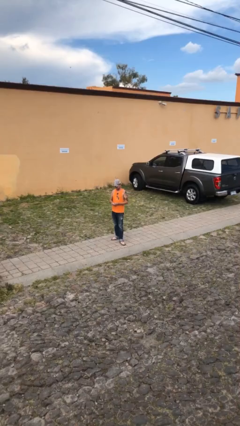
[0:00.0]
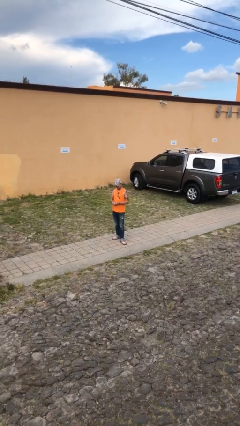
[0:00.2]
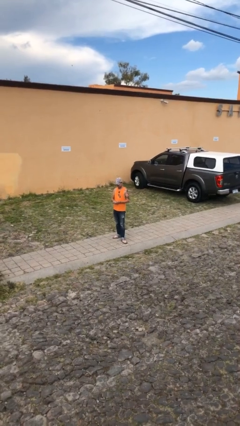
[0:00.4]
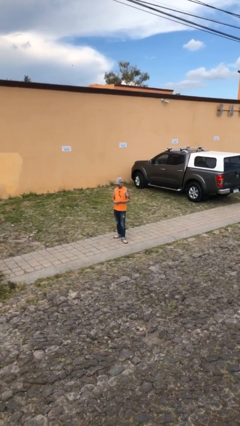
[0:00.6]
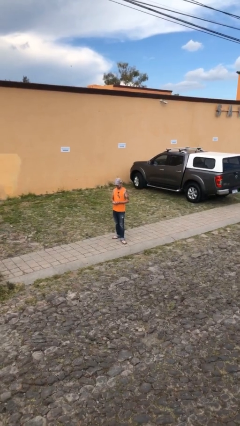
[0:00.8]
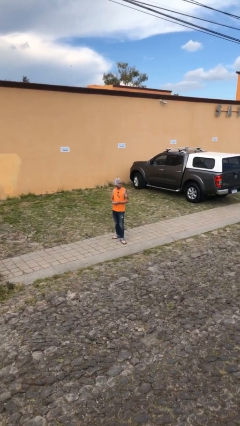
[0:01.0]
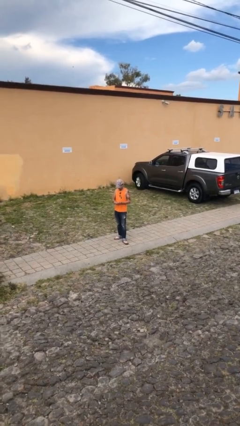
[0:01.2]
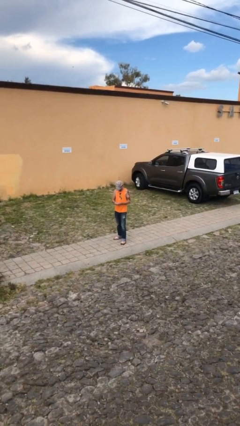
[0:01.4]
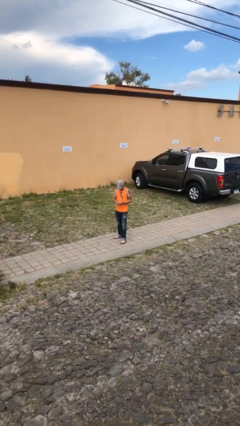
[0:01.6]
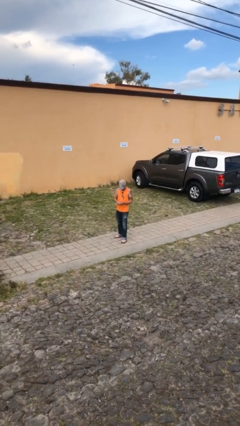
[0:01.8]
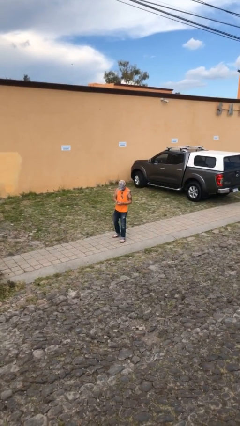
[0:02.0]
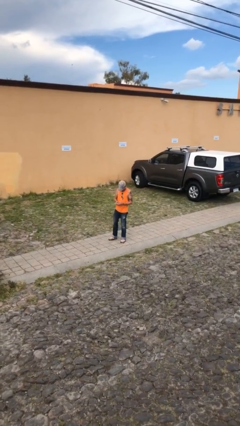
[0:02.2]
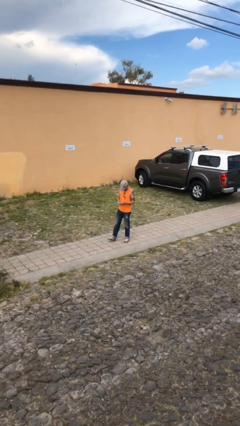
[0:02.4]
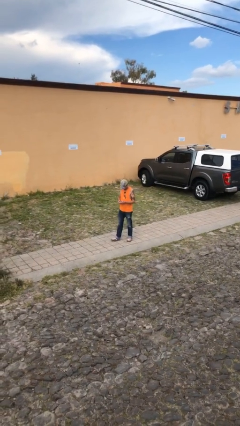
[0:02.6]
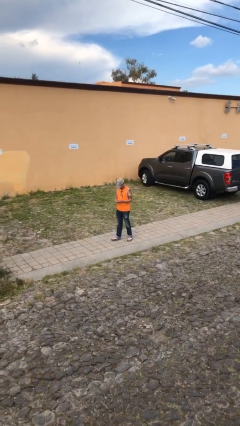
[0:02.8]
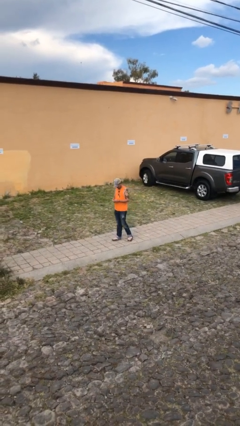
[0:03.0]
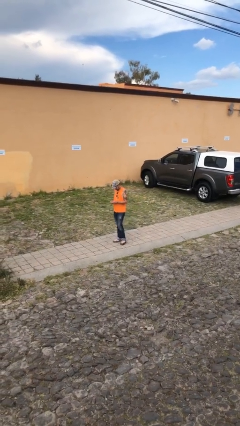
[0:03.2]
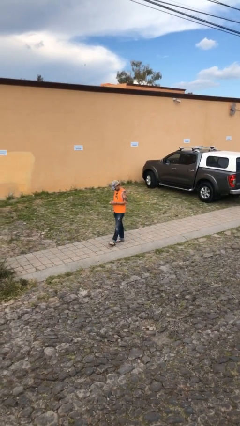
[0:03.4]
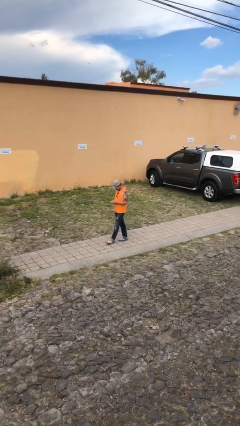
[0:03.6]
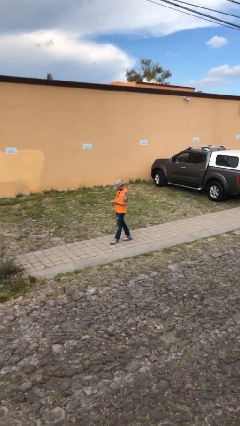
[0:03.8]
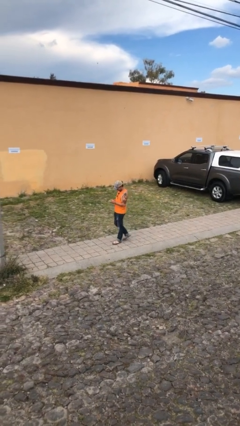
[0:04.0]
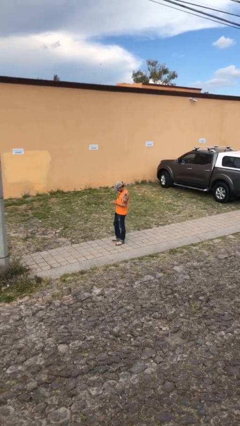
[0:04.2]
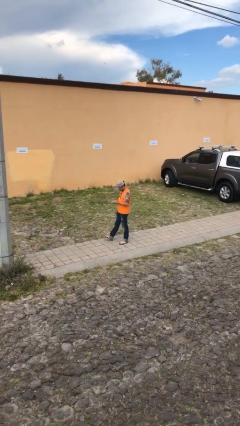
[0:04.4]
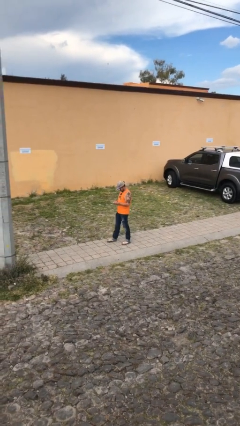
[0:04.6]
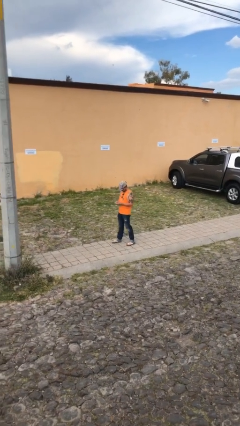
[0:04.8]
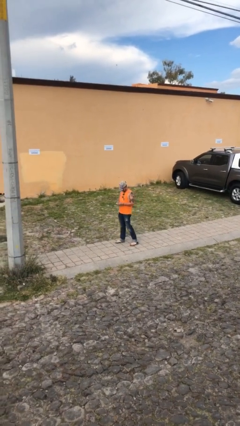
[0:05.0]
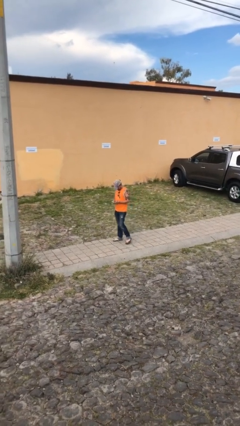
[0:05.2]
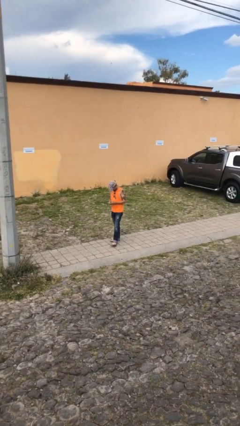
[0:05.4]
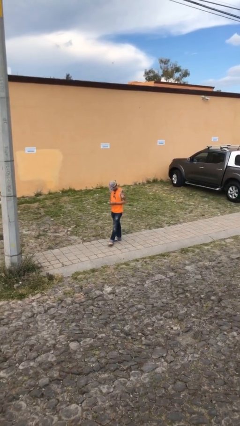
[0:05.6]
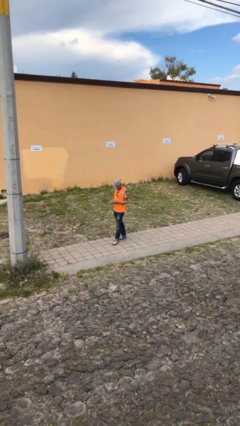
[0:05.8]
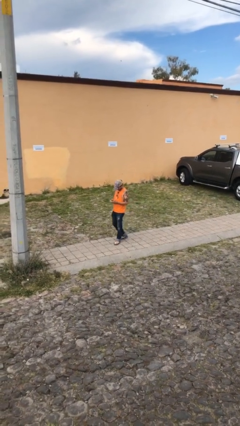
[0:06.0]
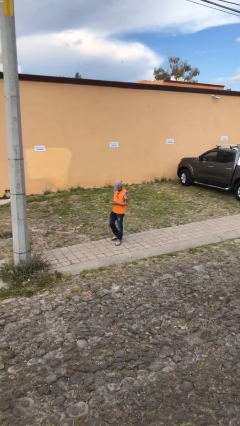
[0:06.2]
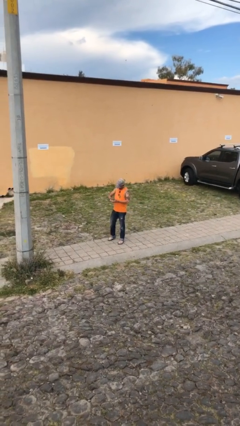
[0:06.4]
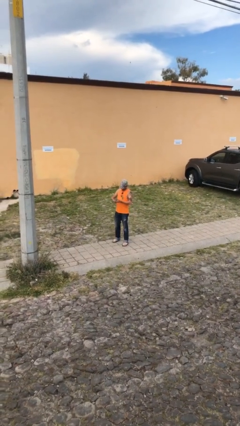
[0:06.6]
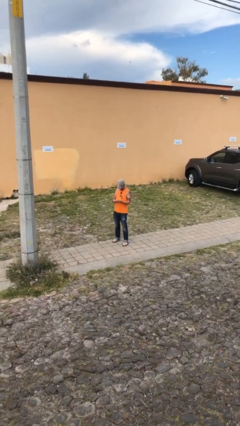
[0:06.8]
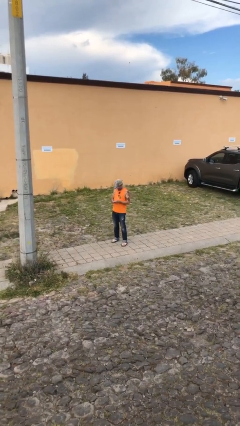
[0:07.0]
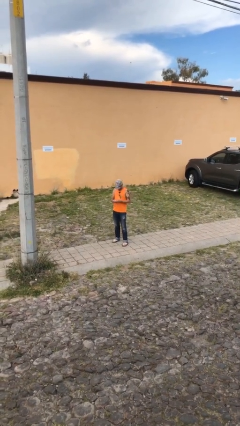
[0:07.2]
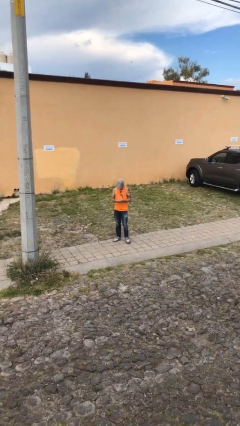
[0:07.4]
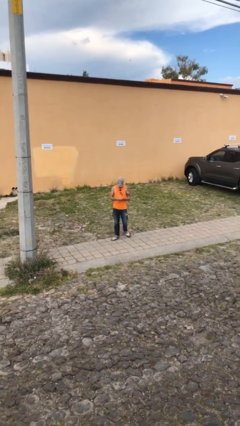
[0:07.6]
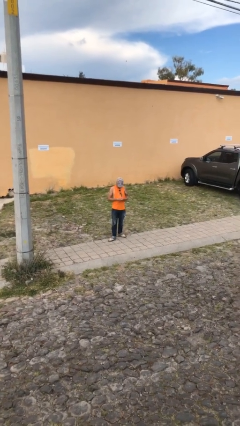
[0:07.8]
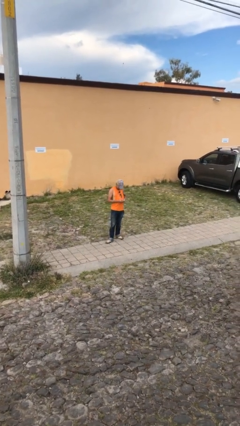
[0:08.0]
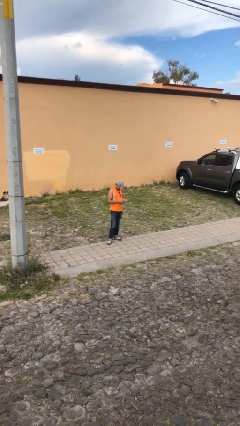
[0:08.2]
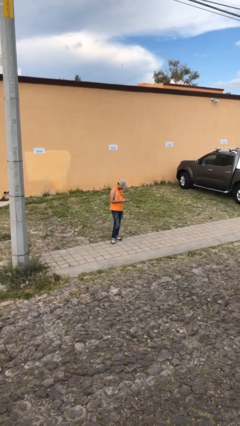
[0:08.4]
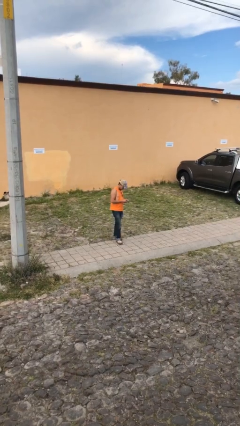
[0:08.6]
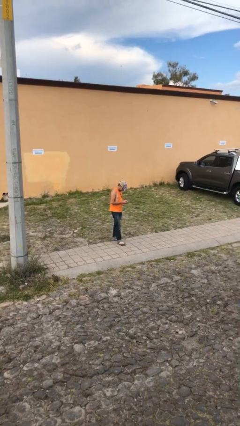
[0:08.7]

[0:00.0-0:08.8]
person texts on phone

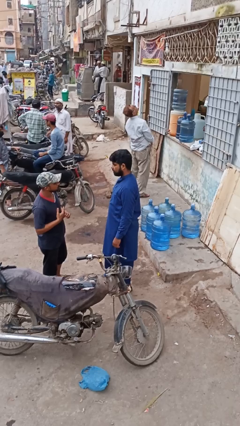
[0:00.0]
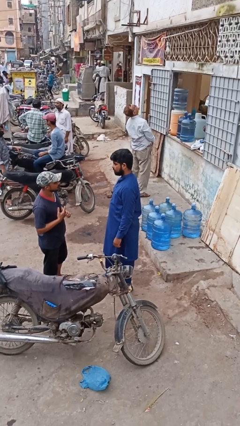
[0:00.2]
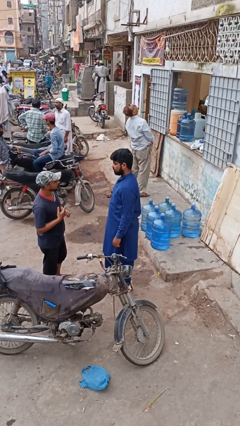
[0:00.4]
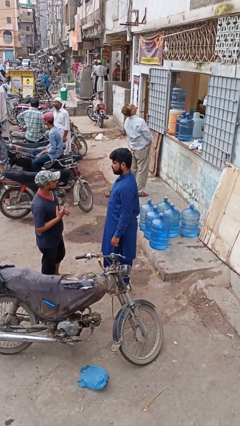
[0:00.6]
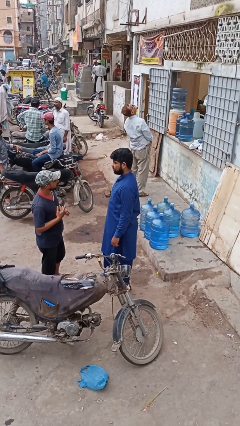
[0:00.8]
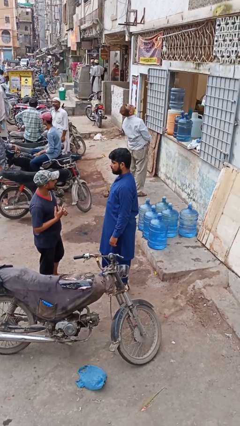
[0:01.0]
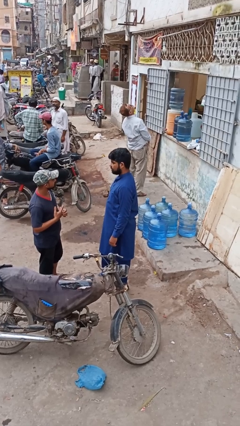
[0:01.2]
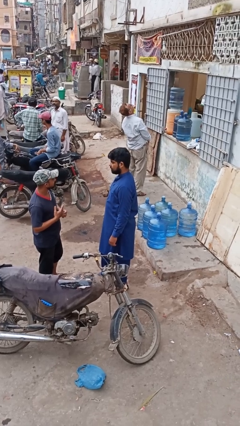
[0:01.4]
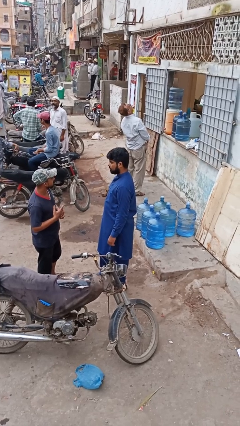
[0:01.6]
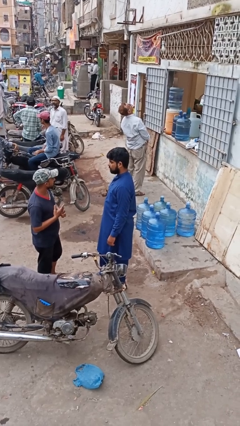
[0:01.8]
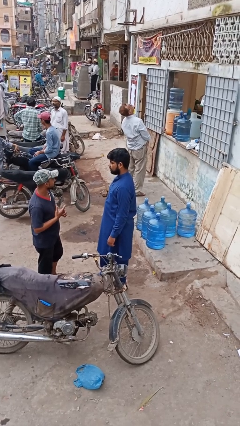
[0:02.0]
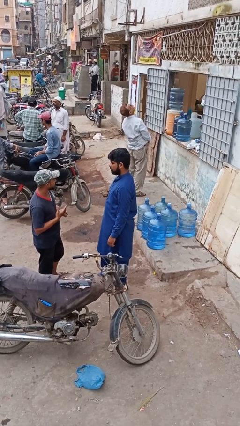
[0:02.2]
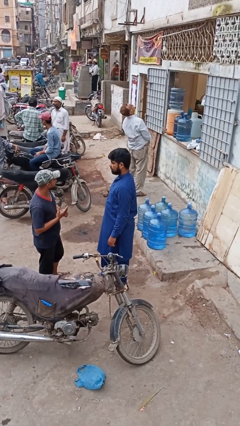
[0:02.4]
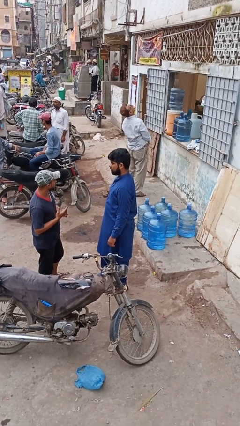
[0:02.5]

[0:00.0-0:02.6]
person talks to person

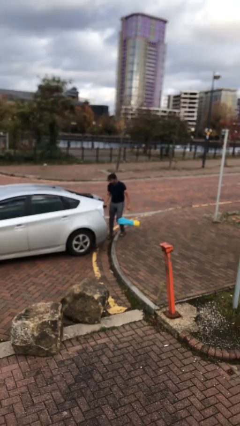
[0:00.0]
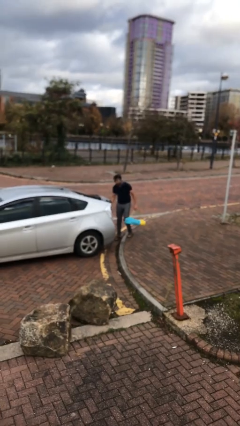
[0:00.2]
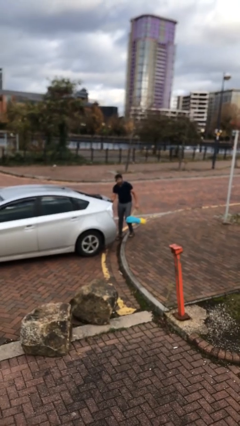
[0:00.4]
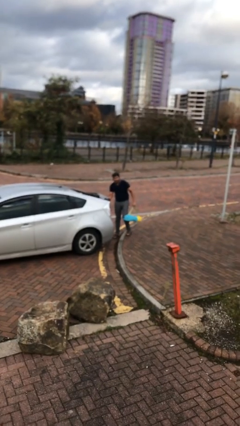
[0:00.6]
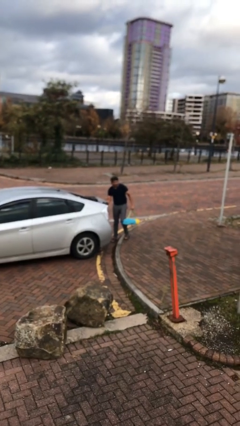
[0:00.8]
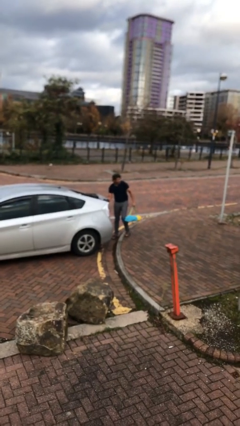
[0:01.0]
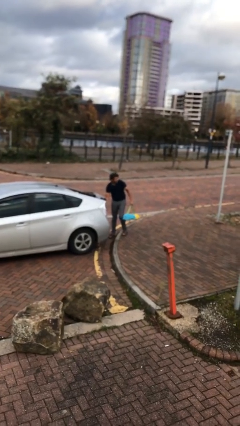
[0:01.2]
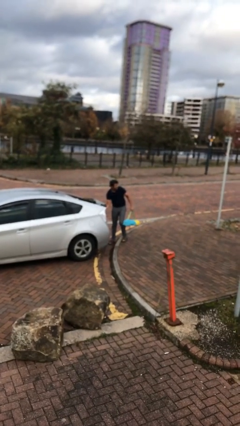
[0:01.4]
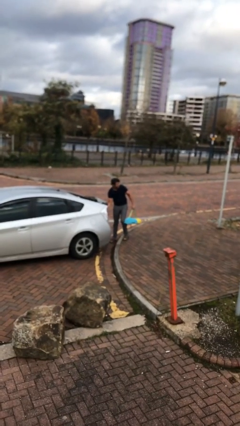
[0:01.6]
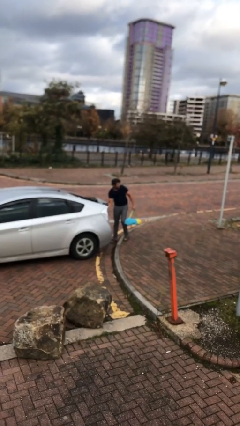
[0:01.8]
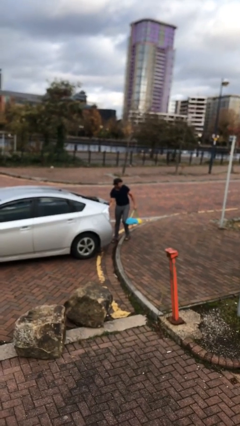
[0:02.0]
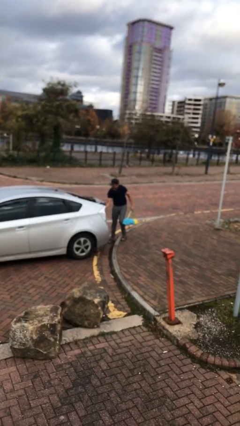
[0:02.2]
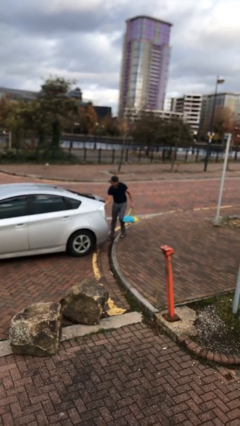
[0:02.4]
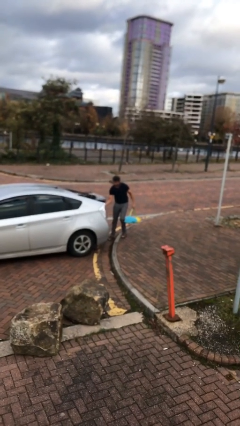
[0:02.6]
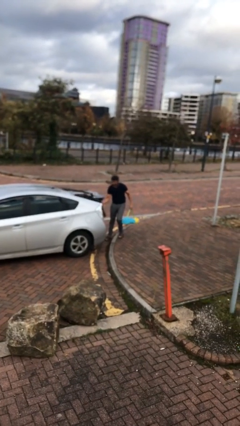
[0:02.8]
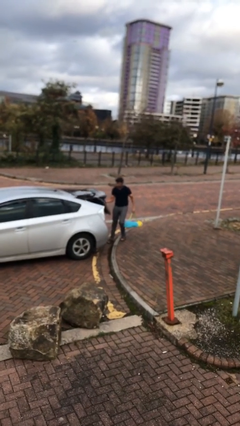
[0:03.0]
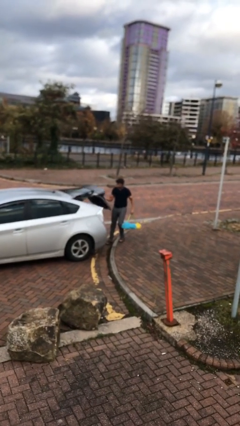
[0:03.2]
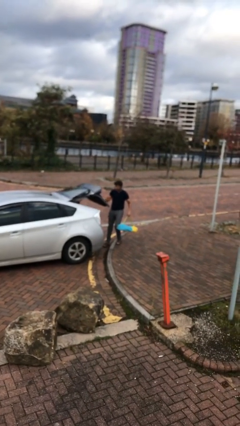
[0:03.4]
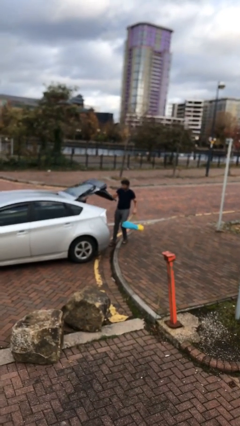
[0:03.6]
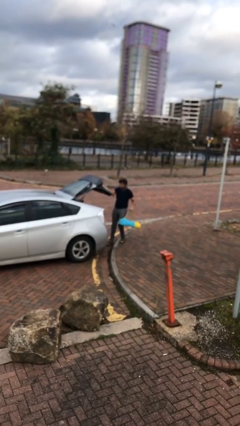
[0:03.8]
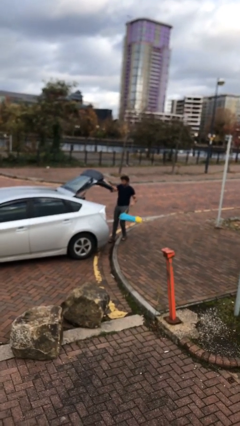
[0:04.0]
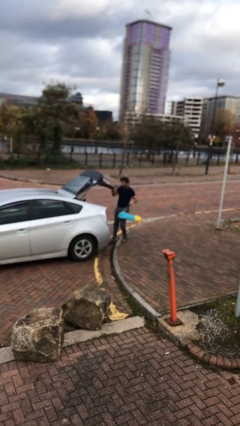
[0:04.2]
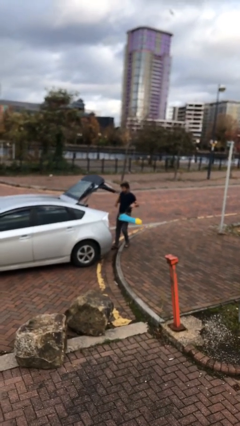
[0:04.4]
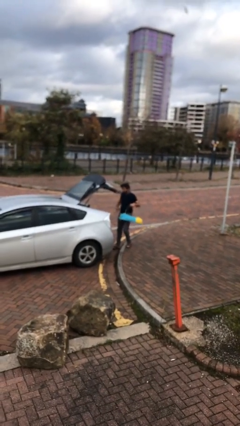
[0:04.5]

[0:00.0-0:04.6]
person opens car trunk

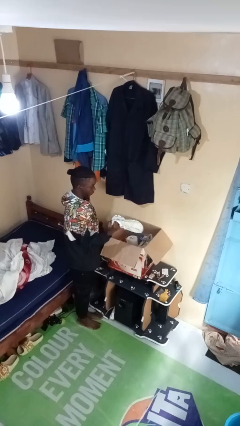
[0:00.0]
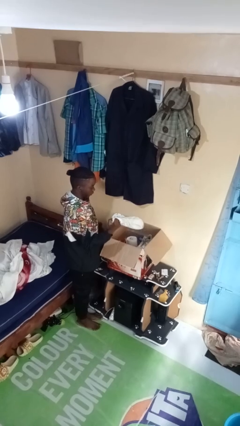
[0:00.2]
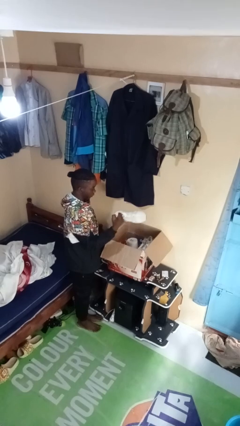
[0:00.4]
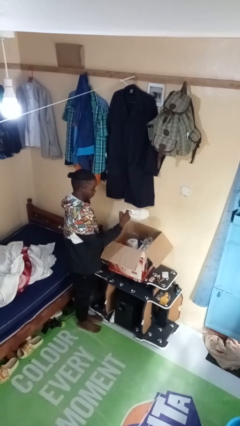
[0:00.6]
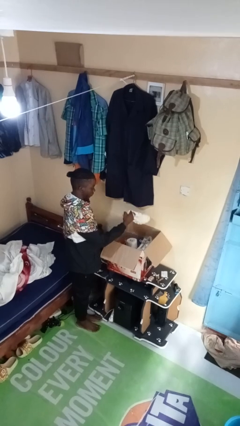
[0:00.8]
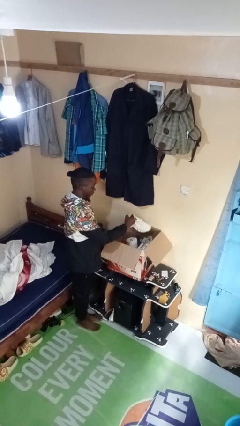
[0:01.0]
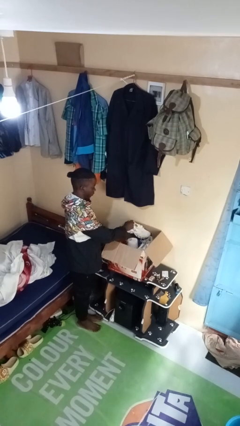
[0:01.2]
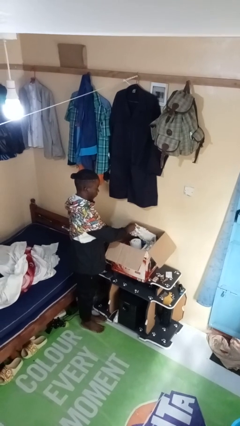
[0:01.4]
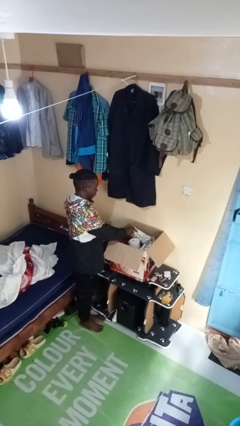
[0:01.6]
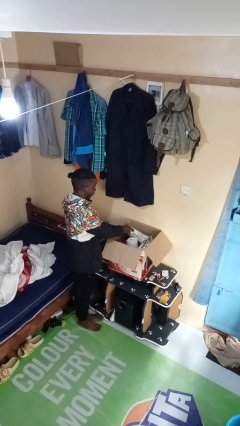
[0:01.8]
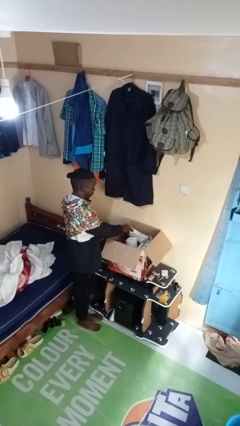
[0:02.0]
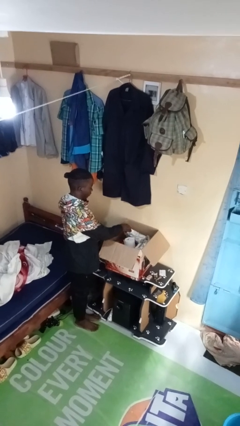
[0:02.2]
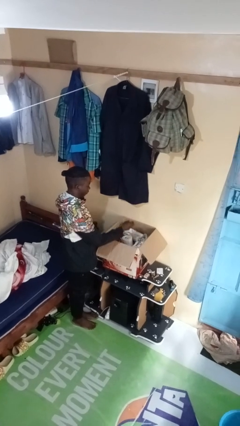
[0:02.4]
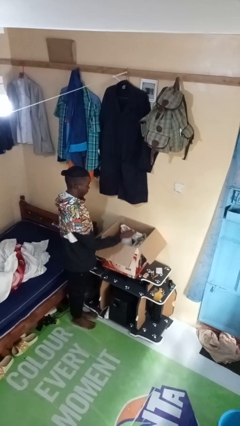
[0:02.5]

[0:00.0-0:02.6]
person puts object into box
